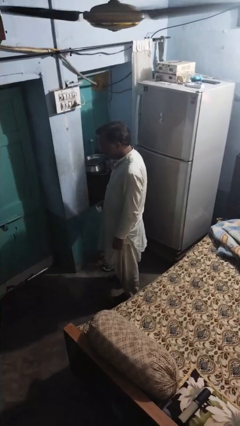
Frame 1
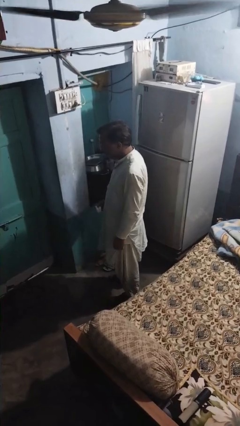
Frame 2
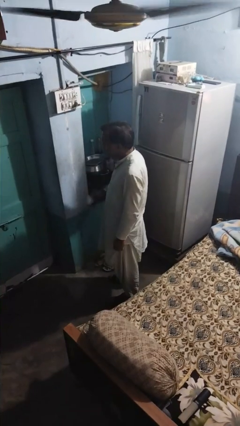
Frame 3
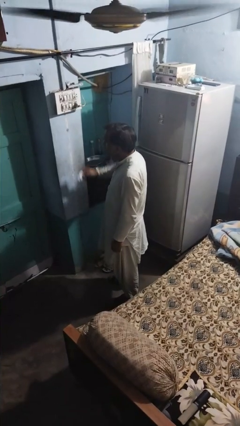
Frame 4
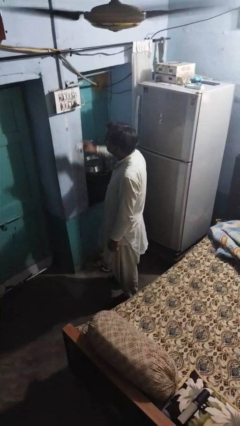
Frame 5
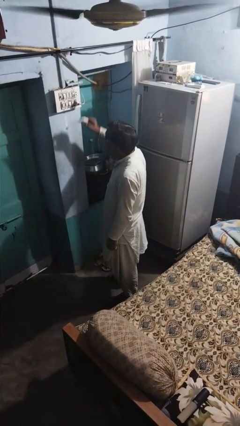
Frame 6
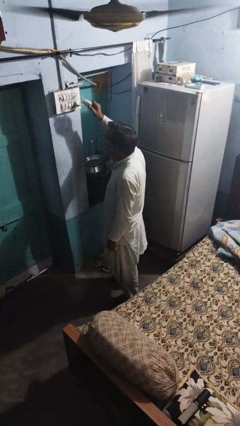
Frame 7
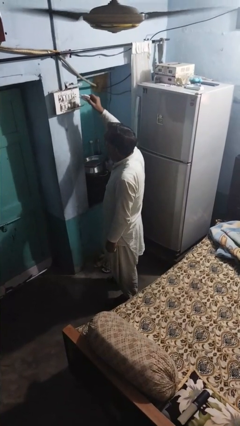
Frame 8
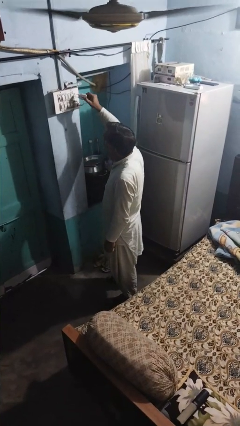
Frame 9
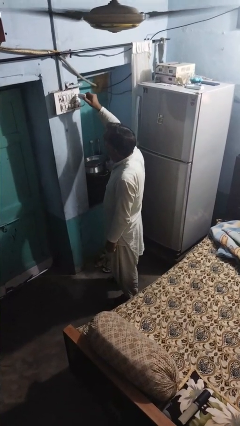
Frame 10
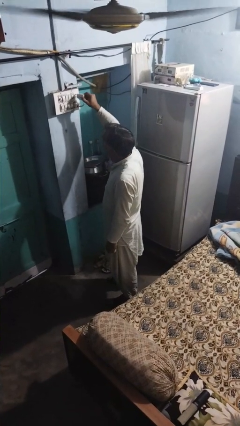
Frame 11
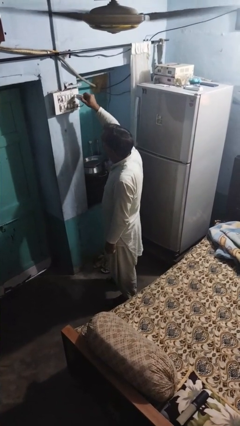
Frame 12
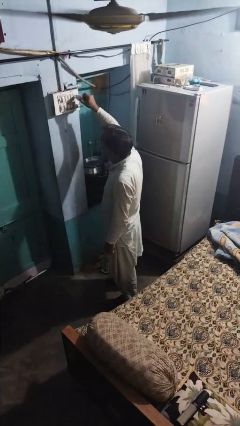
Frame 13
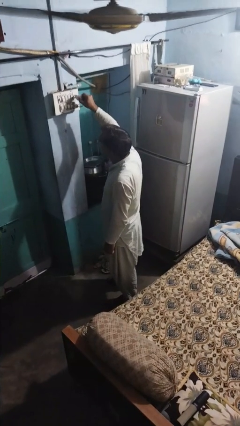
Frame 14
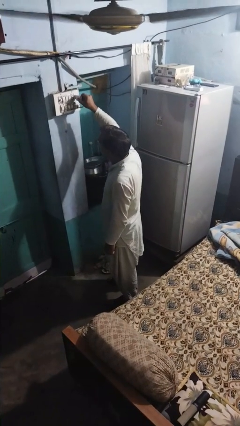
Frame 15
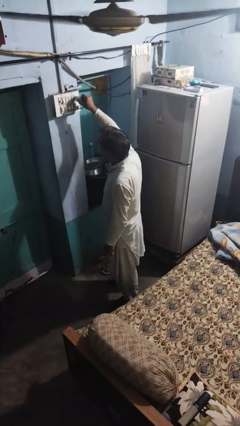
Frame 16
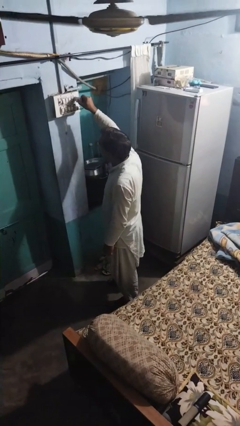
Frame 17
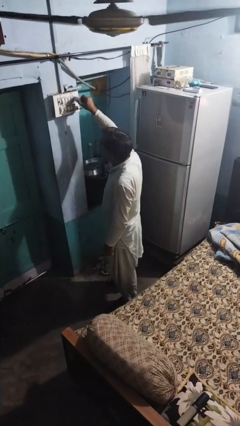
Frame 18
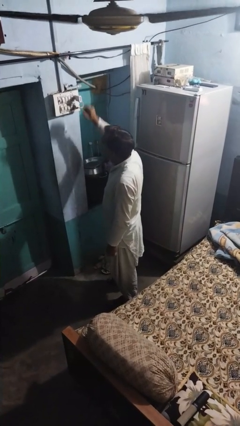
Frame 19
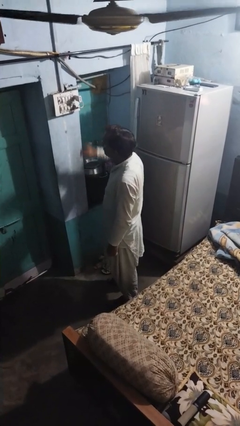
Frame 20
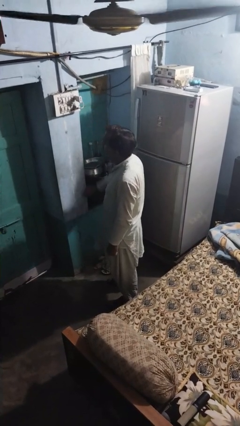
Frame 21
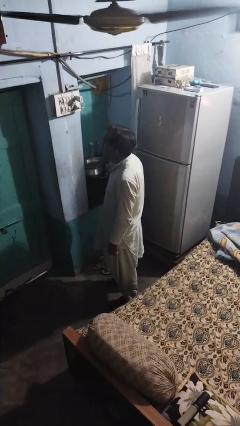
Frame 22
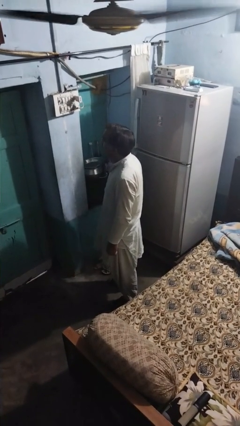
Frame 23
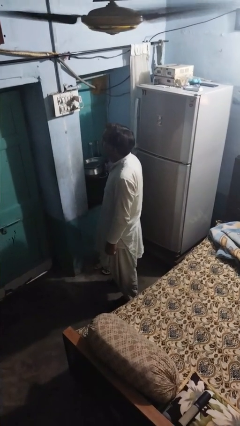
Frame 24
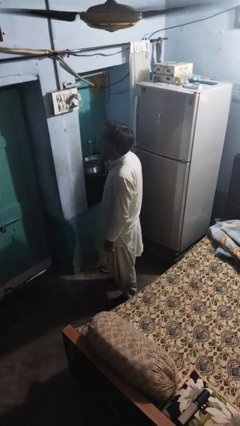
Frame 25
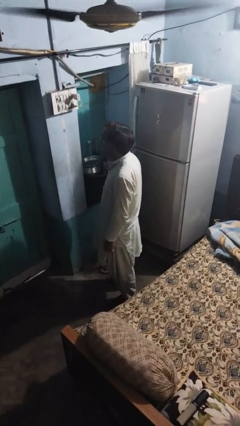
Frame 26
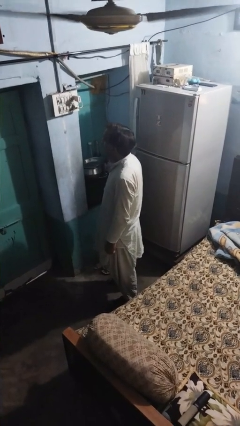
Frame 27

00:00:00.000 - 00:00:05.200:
person plugs into electrical socket

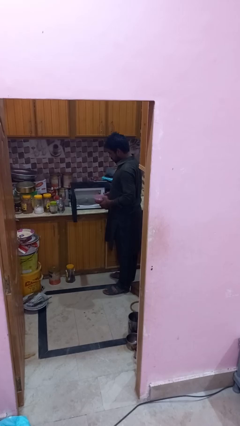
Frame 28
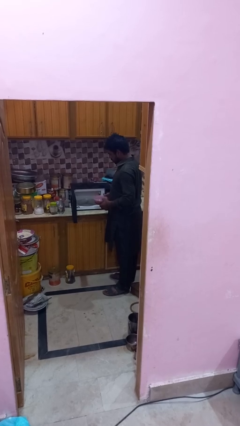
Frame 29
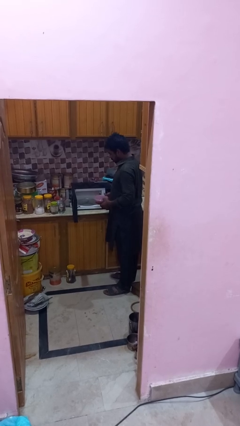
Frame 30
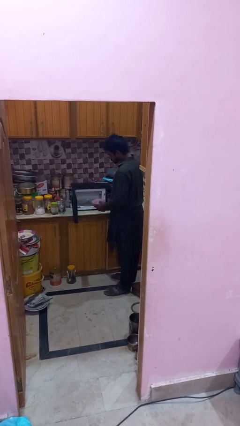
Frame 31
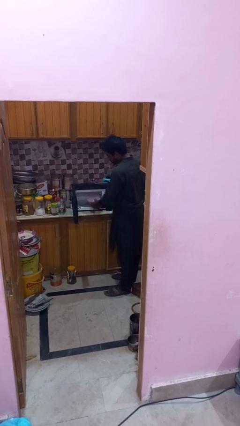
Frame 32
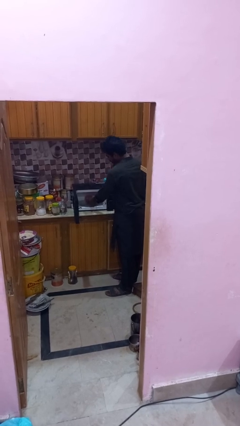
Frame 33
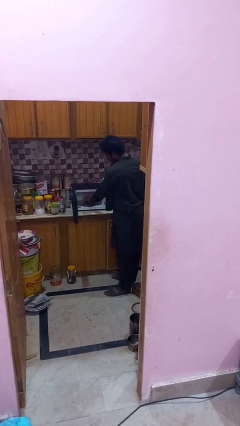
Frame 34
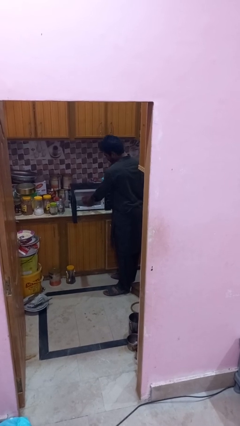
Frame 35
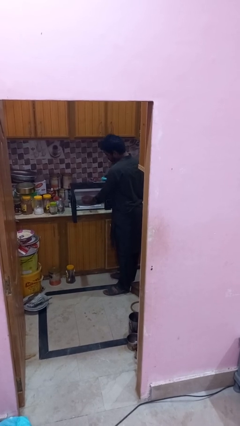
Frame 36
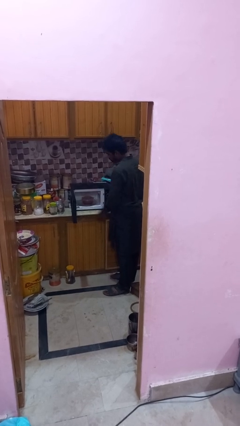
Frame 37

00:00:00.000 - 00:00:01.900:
person puts object into microwave

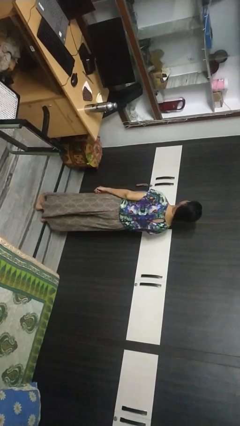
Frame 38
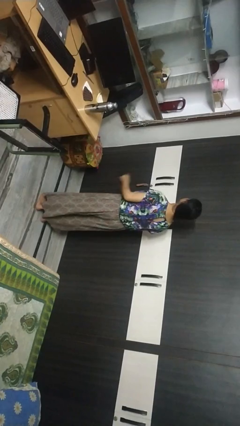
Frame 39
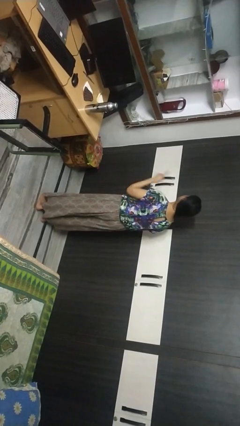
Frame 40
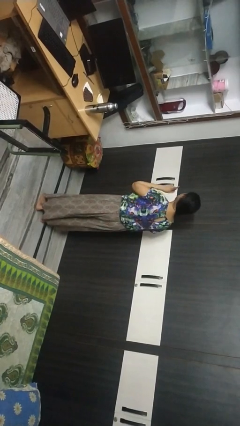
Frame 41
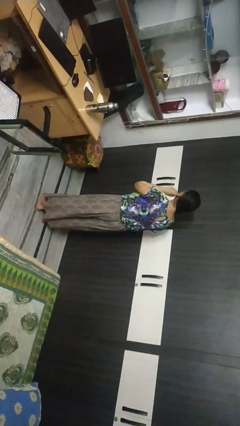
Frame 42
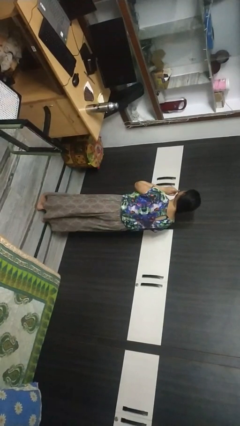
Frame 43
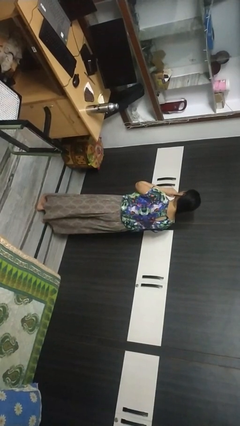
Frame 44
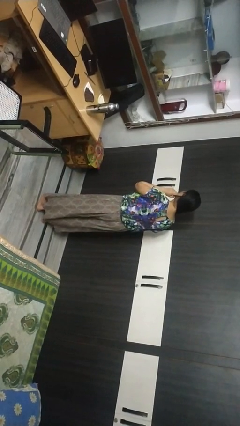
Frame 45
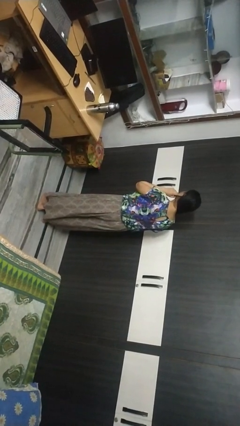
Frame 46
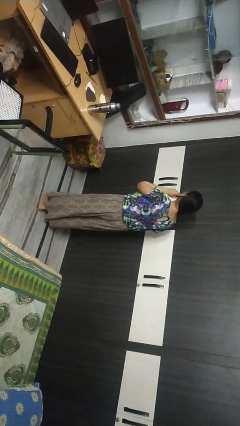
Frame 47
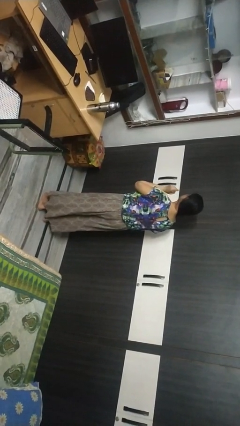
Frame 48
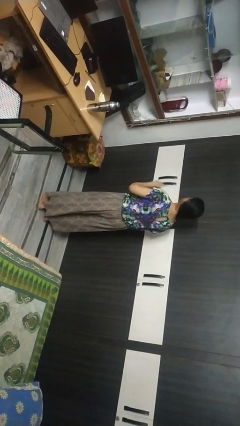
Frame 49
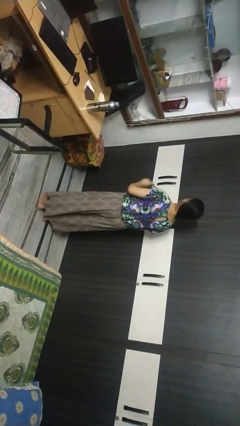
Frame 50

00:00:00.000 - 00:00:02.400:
person gestures listen closely

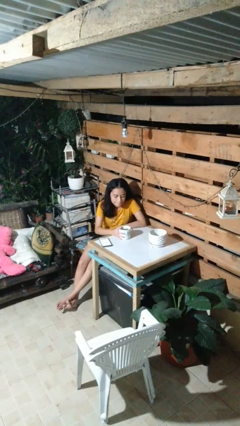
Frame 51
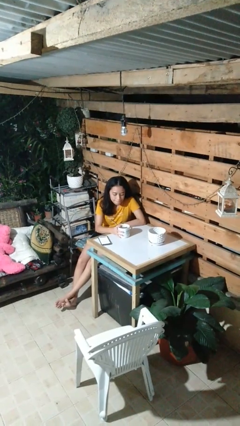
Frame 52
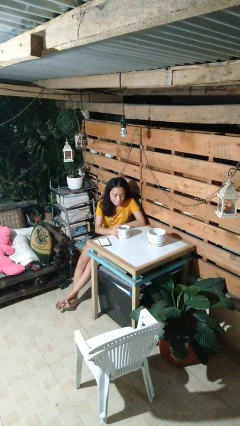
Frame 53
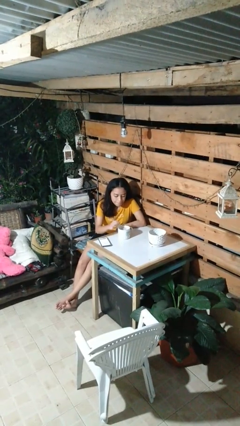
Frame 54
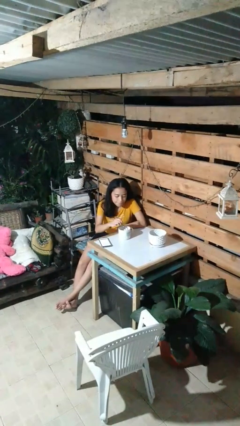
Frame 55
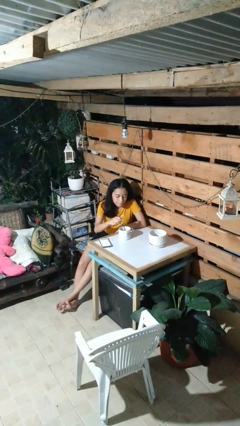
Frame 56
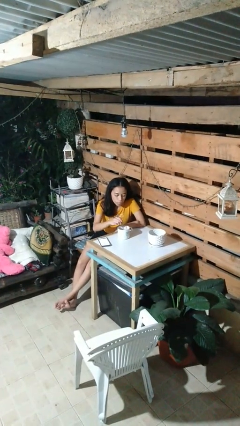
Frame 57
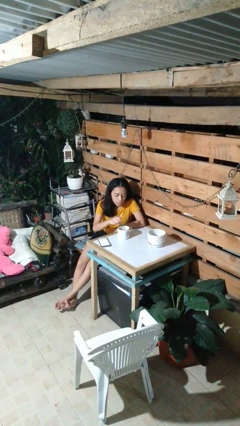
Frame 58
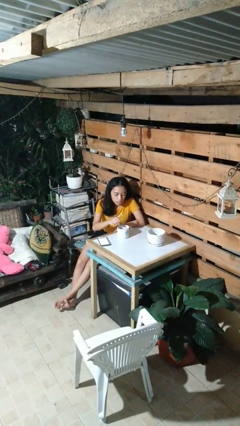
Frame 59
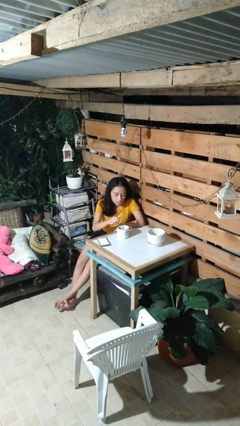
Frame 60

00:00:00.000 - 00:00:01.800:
person stirs mug

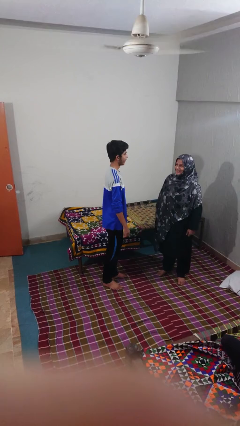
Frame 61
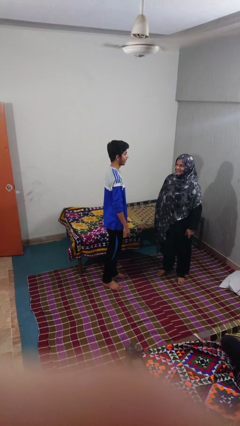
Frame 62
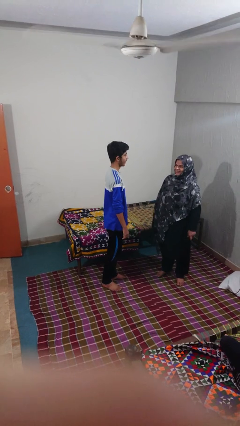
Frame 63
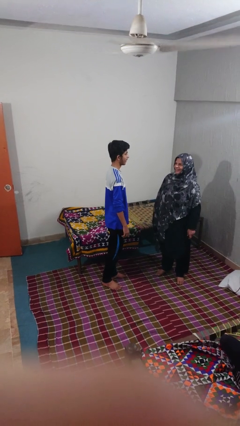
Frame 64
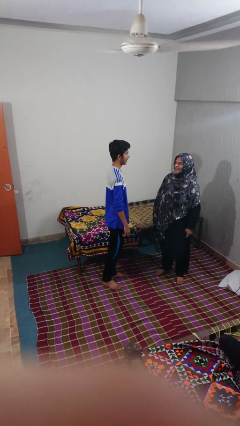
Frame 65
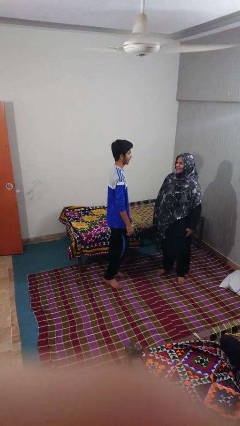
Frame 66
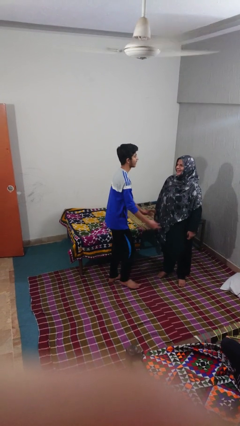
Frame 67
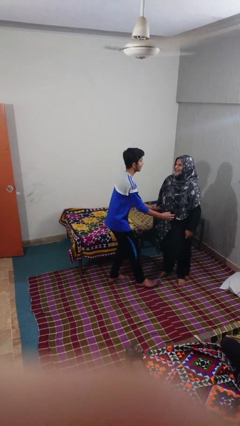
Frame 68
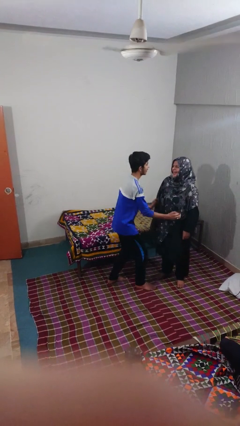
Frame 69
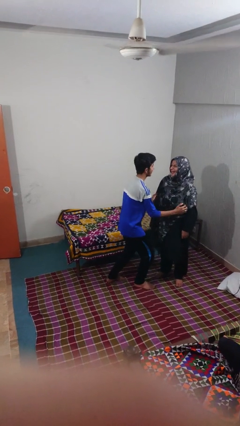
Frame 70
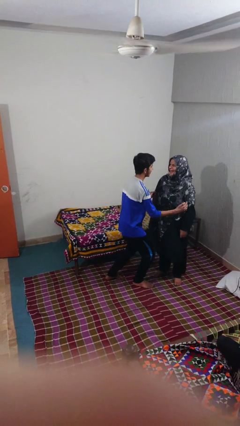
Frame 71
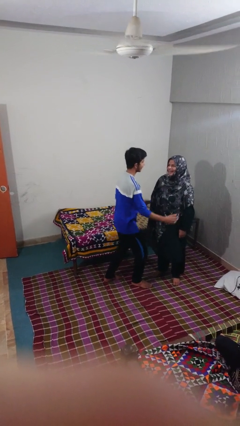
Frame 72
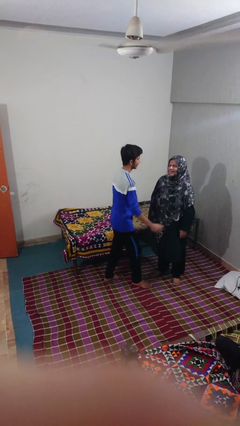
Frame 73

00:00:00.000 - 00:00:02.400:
person tickles person

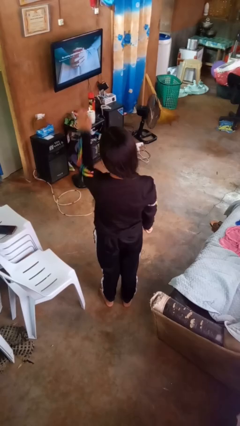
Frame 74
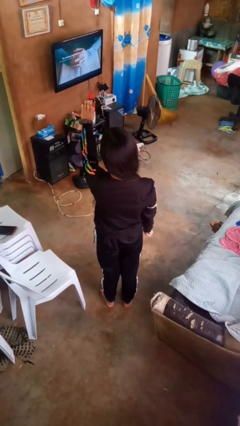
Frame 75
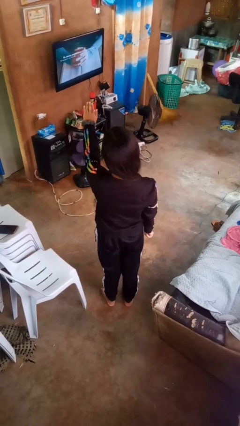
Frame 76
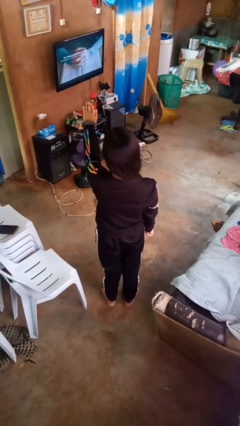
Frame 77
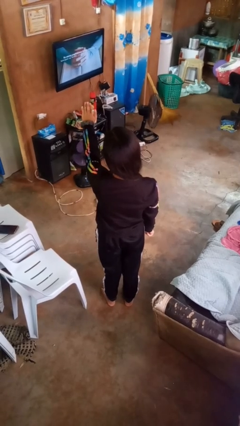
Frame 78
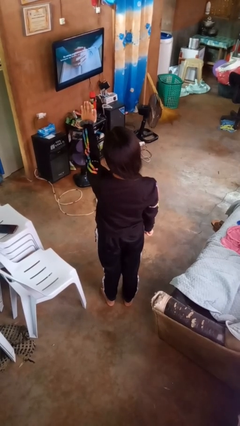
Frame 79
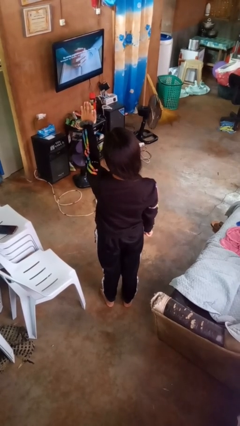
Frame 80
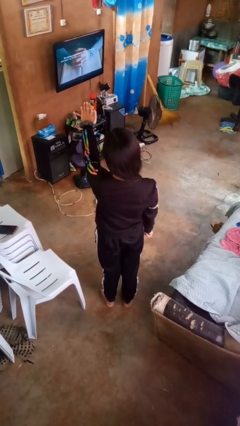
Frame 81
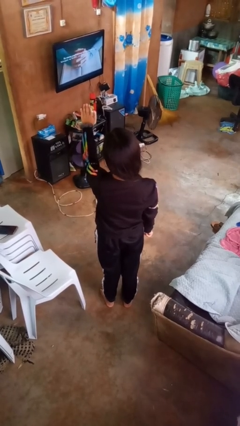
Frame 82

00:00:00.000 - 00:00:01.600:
person gestures stop

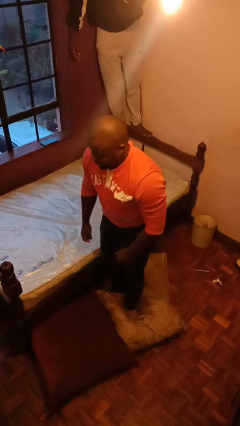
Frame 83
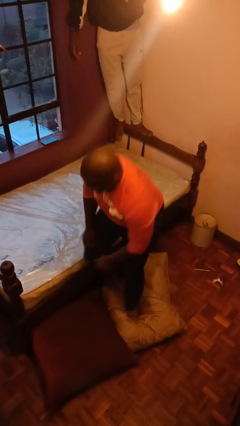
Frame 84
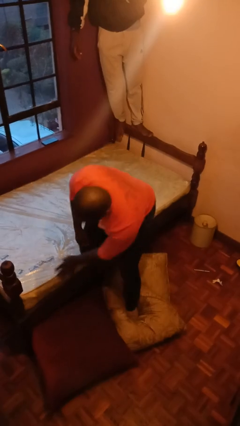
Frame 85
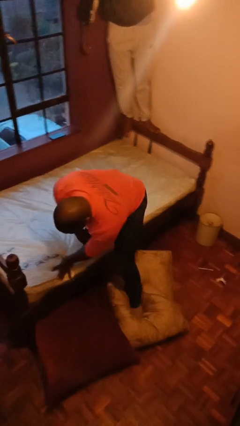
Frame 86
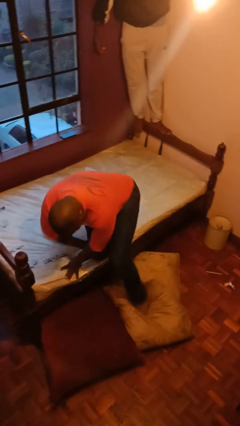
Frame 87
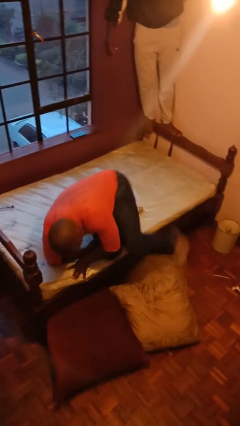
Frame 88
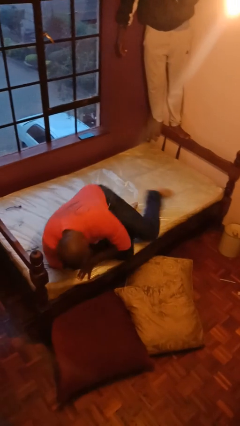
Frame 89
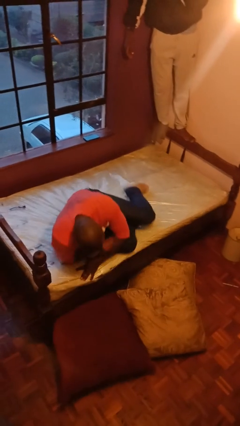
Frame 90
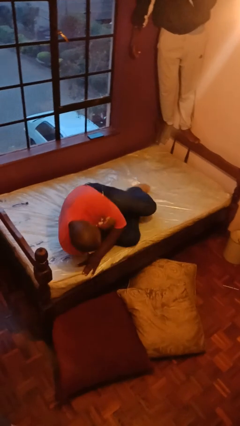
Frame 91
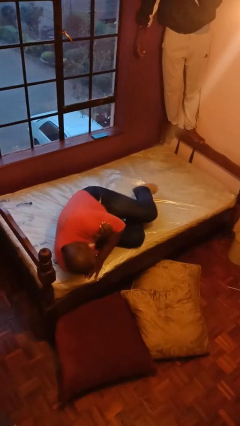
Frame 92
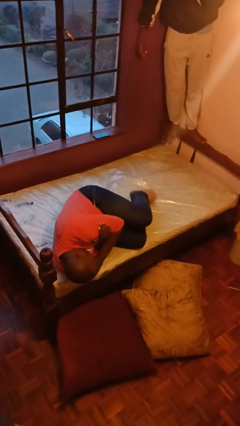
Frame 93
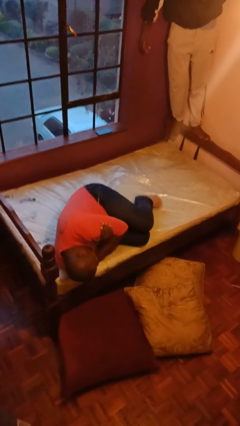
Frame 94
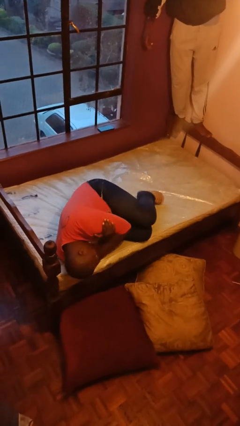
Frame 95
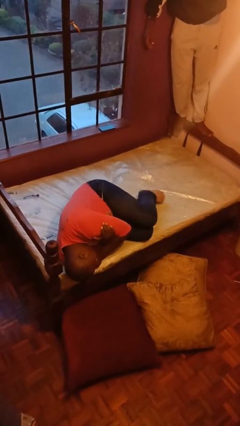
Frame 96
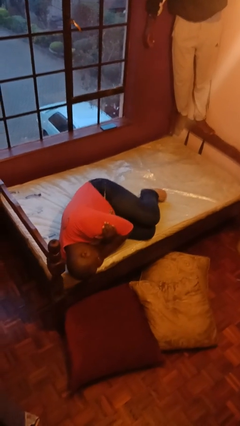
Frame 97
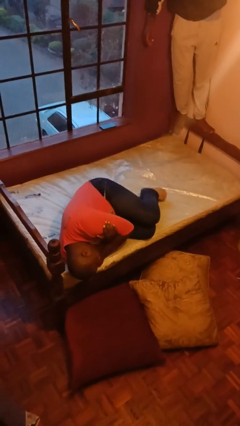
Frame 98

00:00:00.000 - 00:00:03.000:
person lies down on bed
